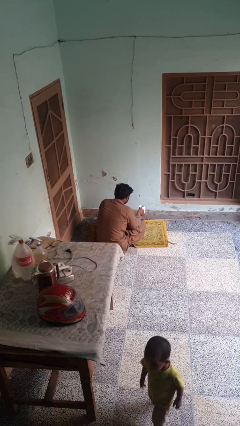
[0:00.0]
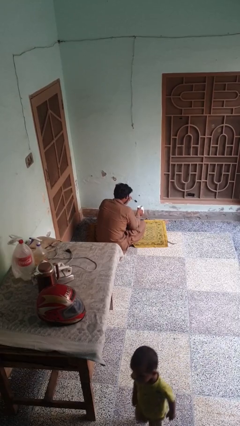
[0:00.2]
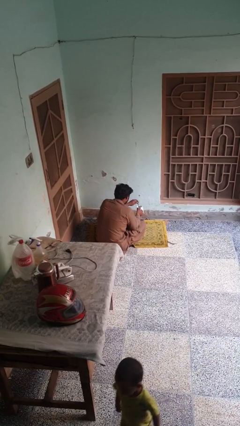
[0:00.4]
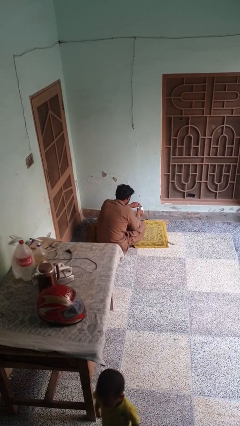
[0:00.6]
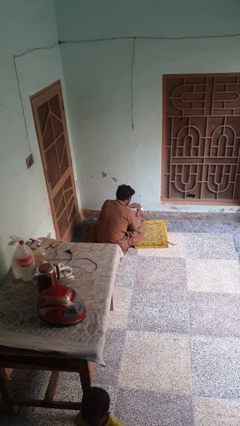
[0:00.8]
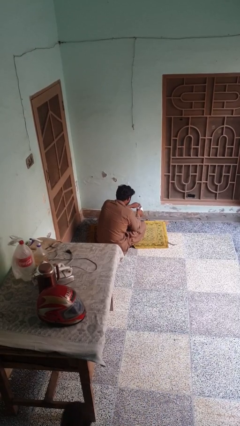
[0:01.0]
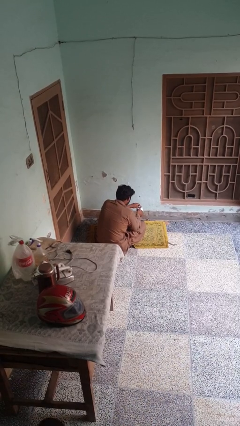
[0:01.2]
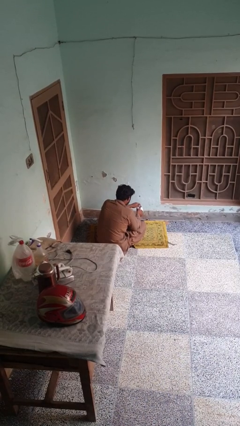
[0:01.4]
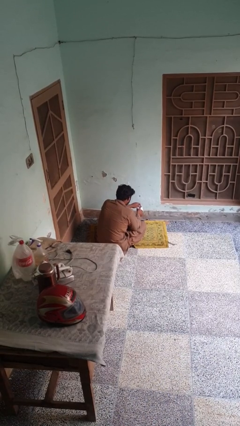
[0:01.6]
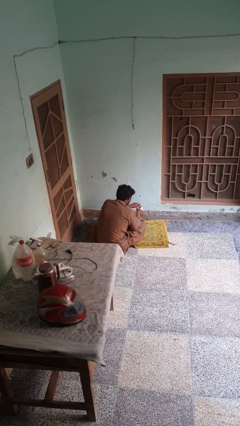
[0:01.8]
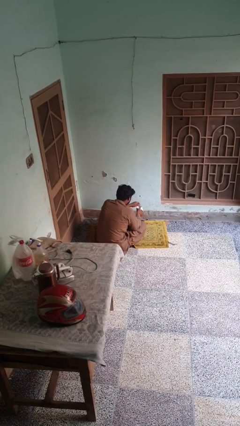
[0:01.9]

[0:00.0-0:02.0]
person stirs mug

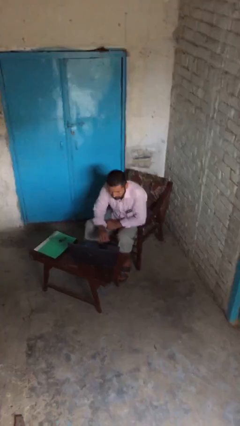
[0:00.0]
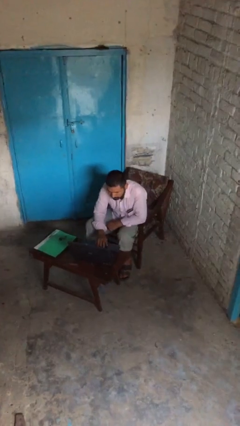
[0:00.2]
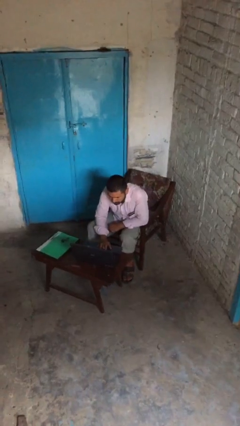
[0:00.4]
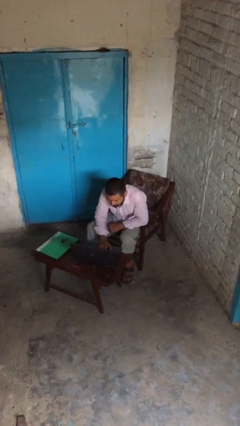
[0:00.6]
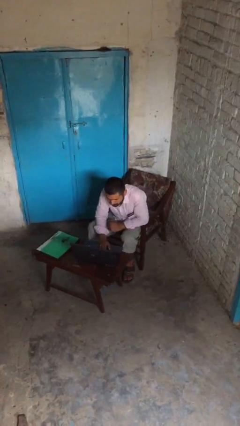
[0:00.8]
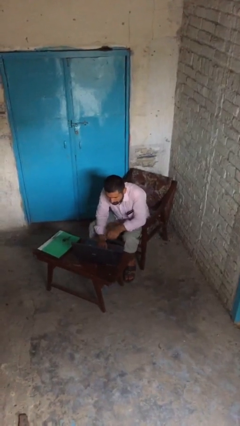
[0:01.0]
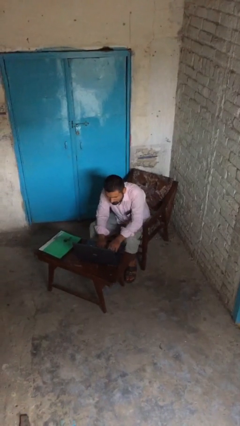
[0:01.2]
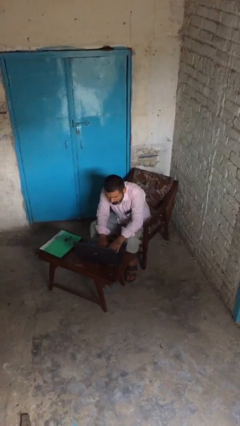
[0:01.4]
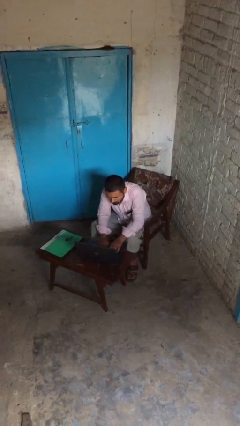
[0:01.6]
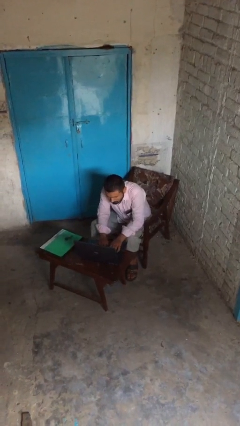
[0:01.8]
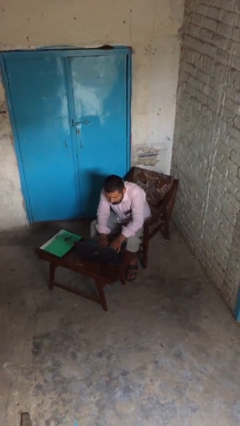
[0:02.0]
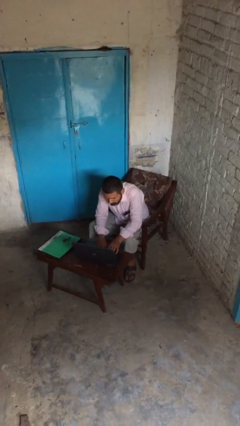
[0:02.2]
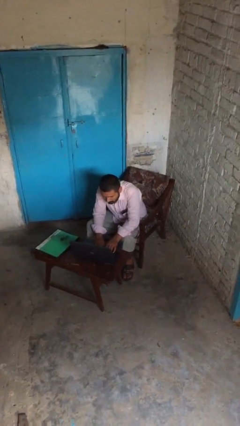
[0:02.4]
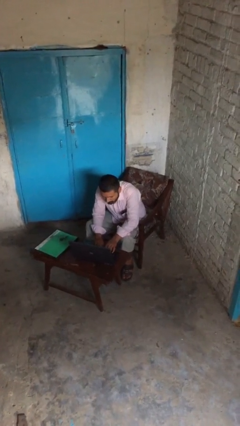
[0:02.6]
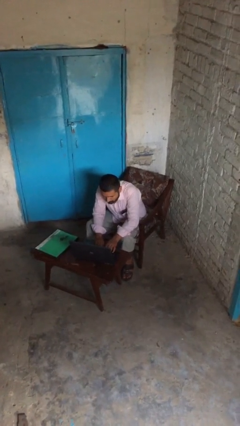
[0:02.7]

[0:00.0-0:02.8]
person interacts with laptop

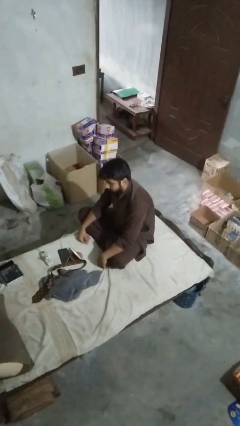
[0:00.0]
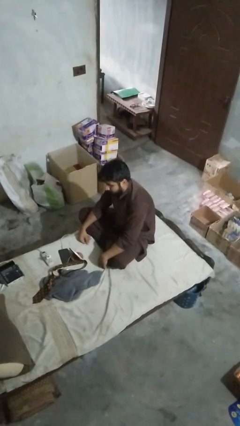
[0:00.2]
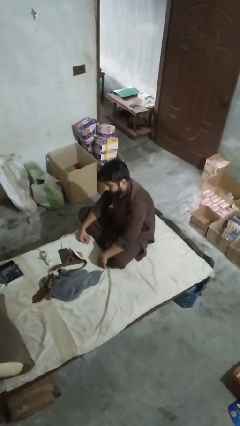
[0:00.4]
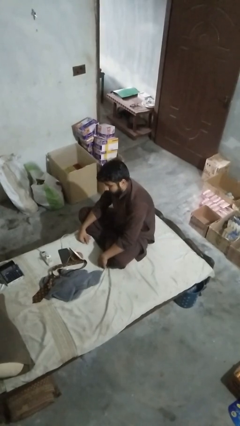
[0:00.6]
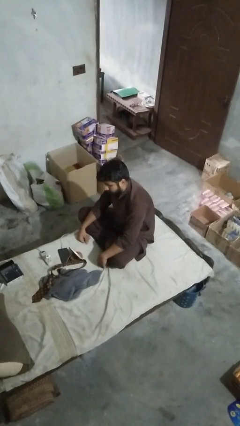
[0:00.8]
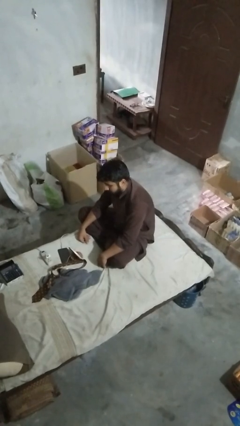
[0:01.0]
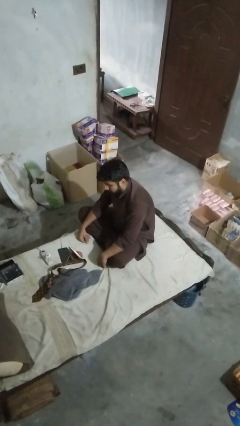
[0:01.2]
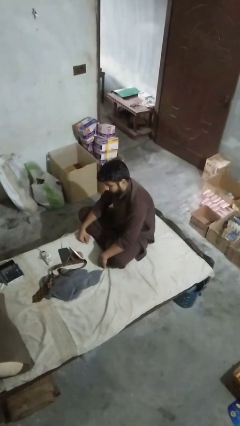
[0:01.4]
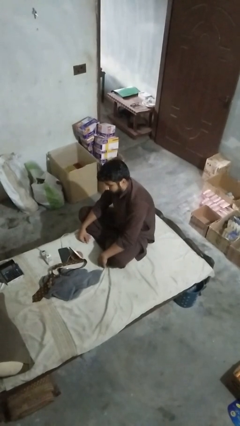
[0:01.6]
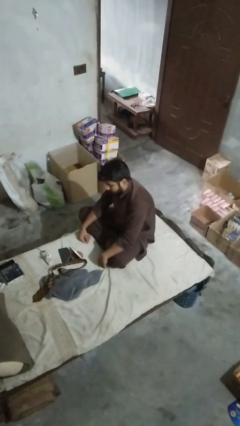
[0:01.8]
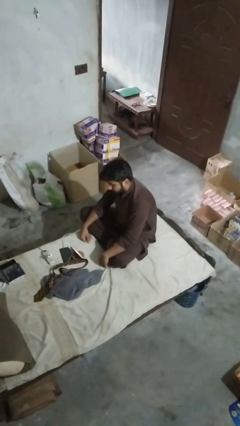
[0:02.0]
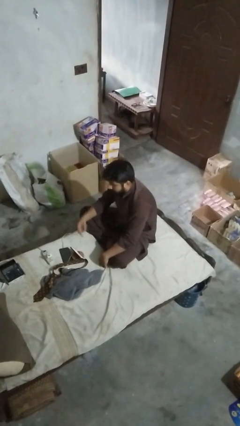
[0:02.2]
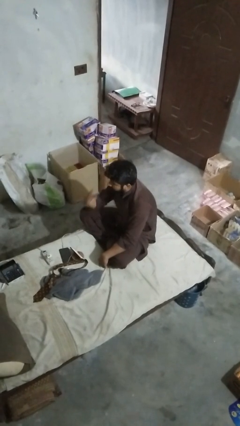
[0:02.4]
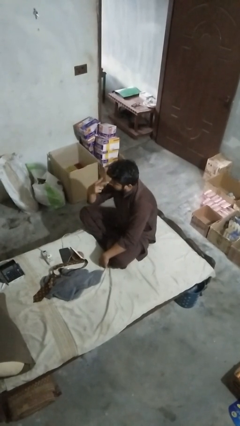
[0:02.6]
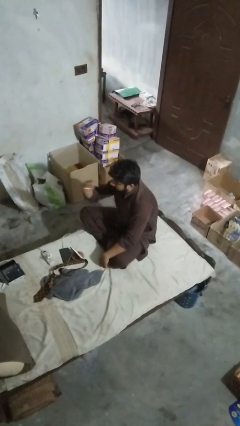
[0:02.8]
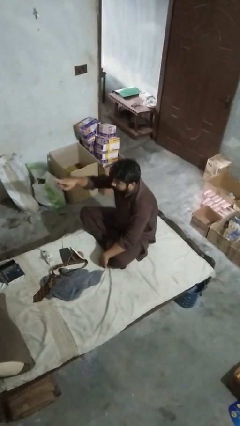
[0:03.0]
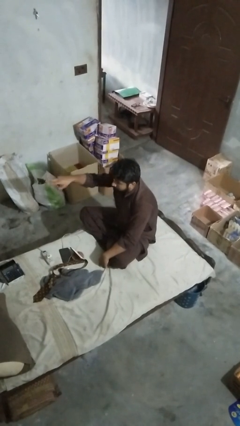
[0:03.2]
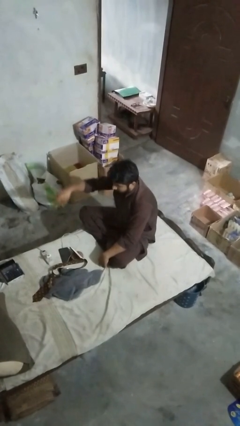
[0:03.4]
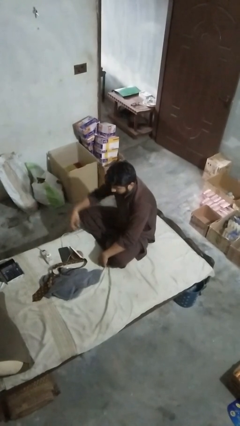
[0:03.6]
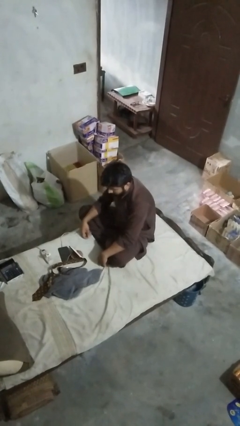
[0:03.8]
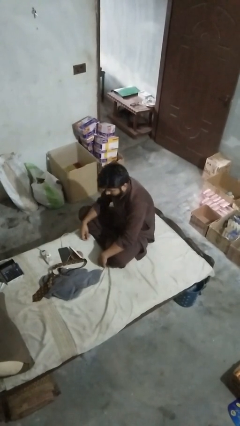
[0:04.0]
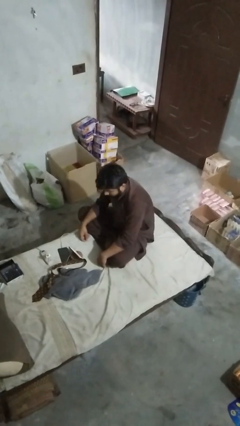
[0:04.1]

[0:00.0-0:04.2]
person gestures watch closely

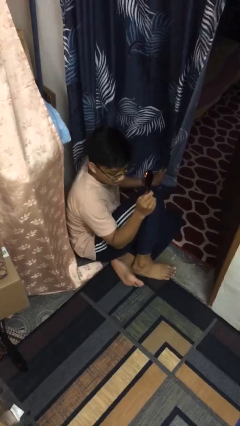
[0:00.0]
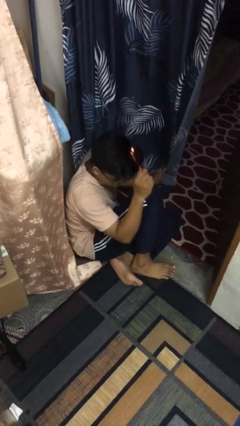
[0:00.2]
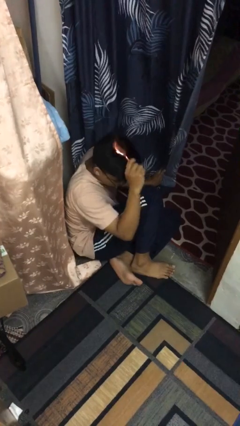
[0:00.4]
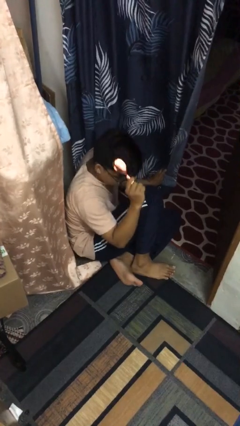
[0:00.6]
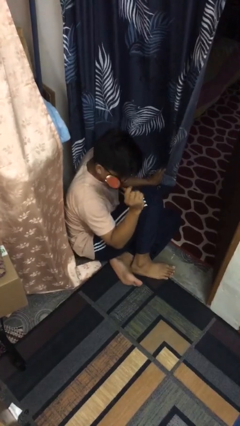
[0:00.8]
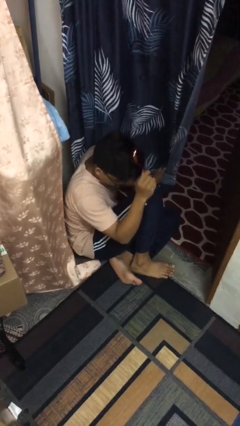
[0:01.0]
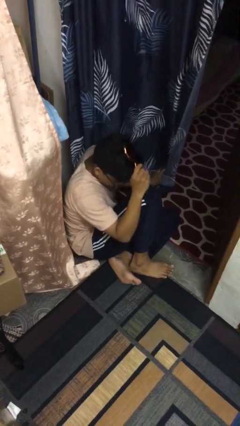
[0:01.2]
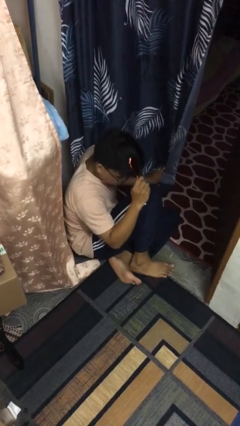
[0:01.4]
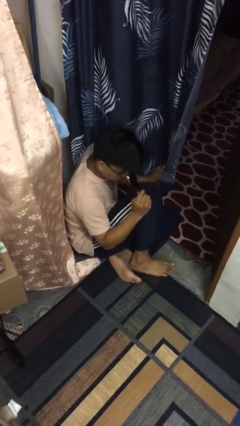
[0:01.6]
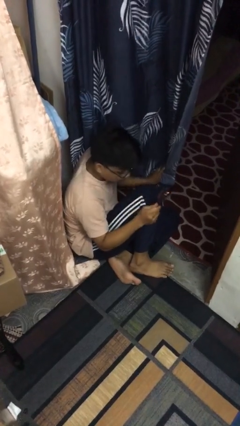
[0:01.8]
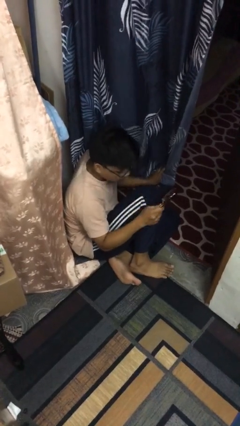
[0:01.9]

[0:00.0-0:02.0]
person brushes hair

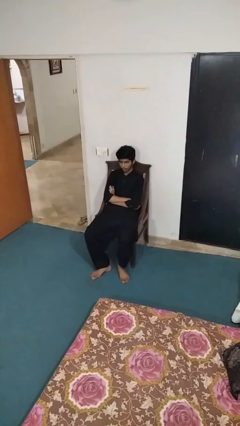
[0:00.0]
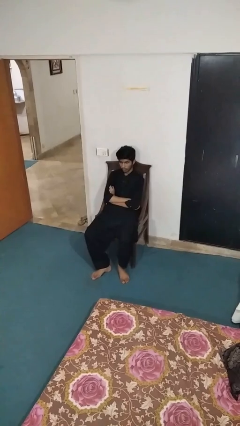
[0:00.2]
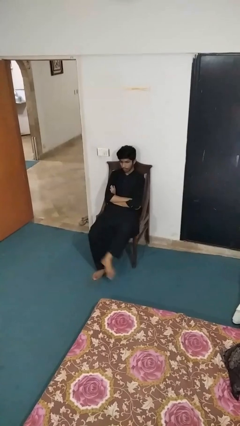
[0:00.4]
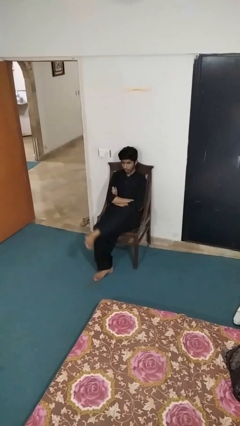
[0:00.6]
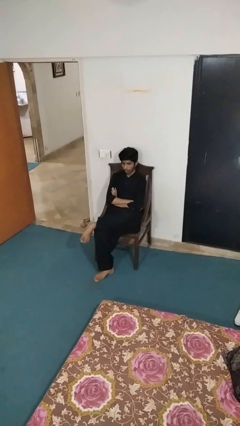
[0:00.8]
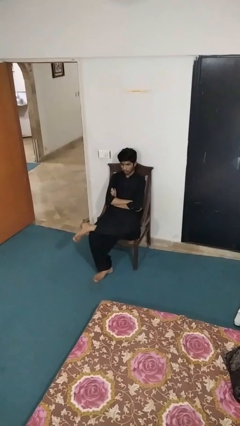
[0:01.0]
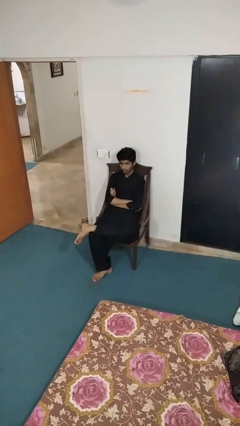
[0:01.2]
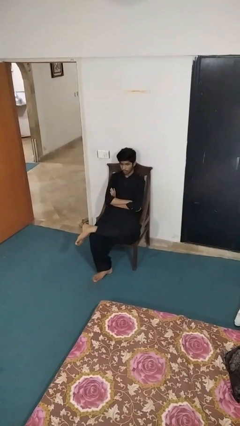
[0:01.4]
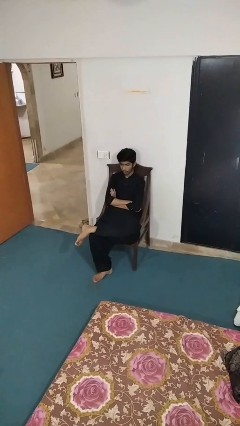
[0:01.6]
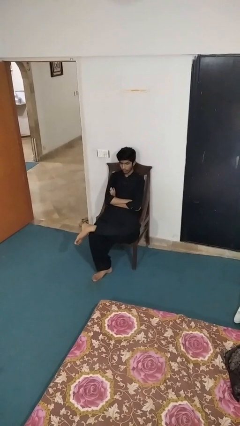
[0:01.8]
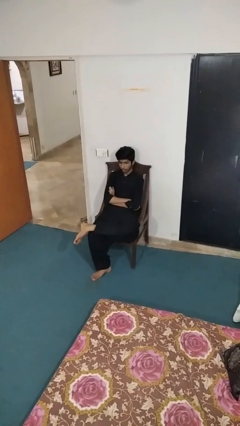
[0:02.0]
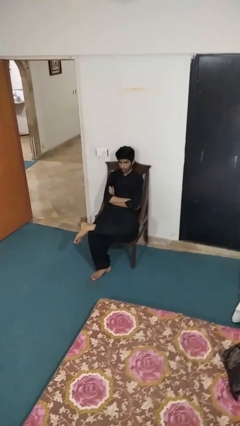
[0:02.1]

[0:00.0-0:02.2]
person crosses legs

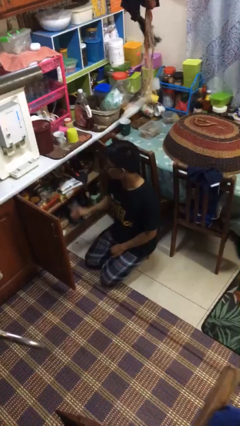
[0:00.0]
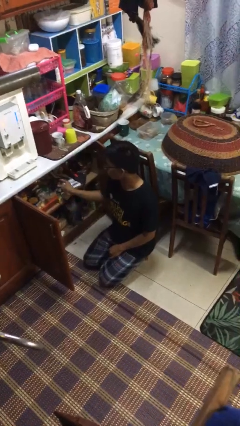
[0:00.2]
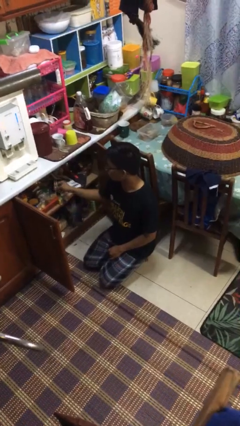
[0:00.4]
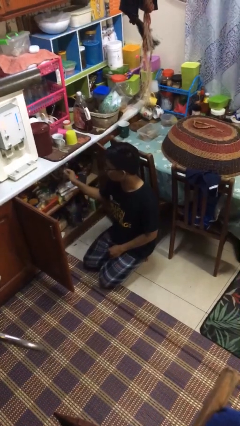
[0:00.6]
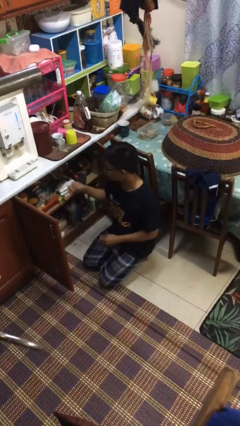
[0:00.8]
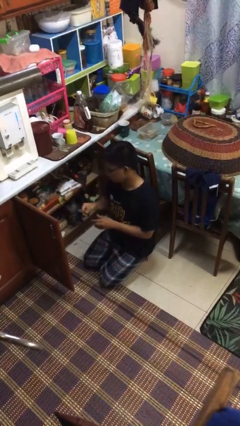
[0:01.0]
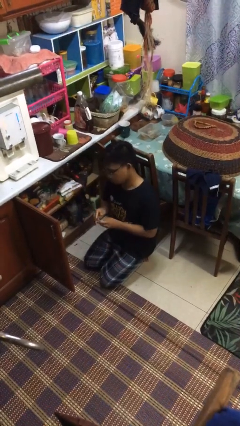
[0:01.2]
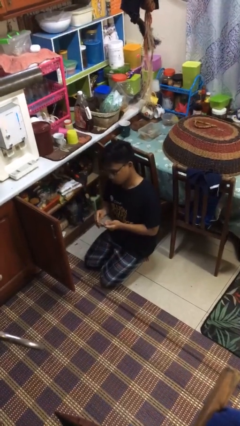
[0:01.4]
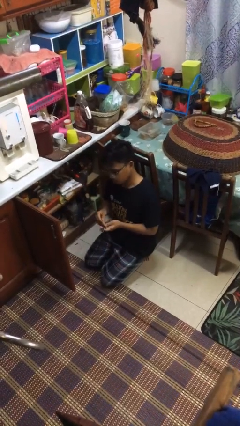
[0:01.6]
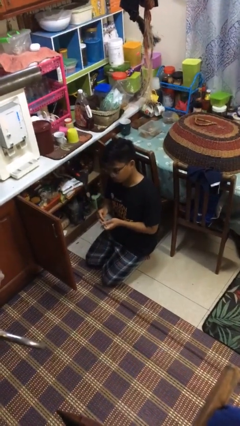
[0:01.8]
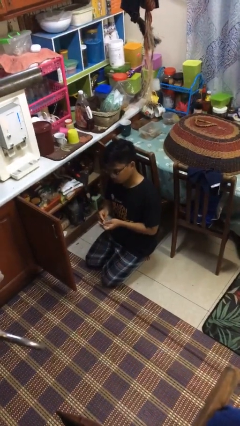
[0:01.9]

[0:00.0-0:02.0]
person takes object from kitchen drawer

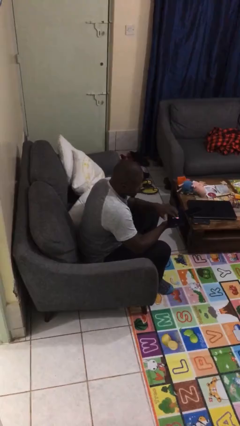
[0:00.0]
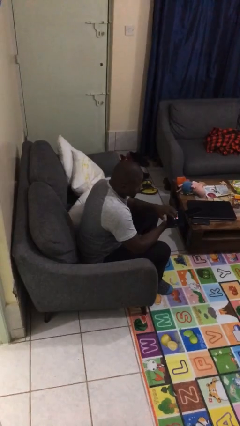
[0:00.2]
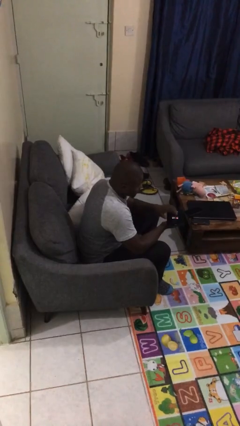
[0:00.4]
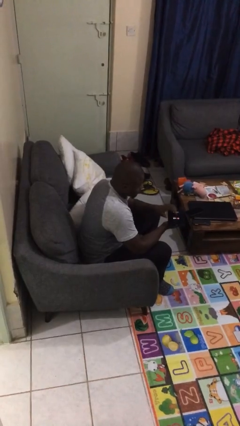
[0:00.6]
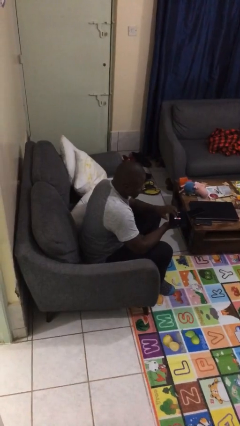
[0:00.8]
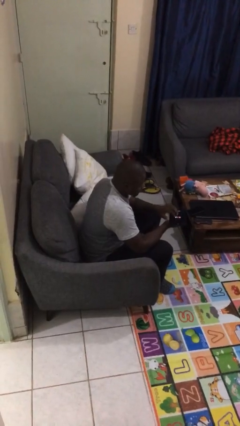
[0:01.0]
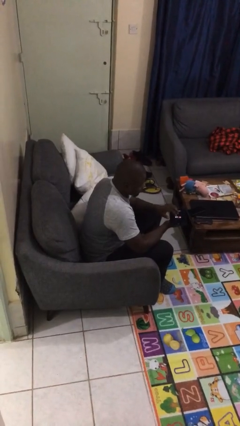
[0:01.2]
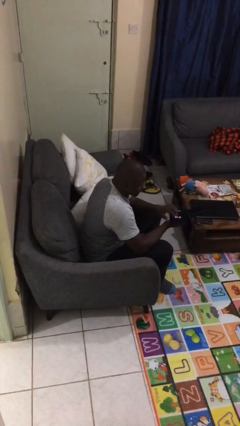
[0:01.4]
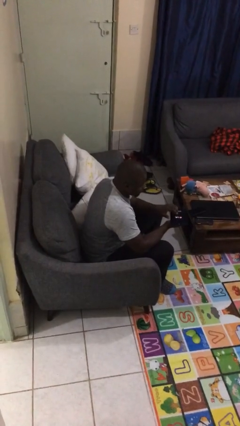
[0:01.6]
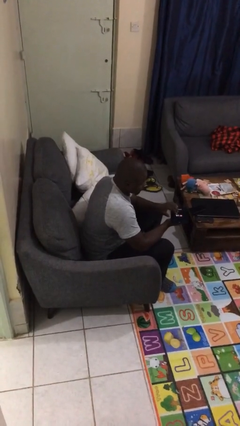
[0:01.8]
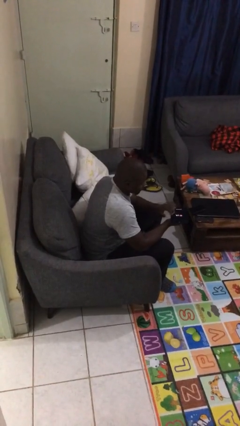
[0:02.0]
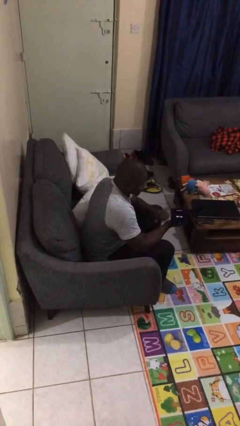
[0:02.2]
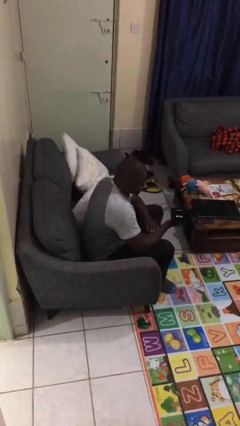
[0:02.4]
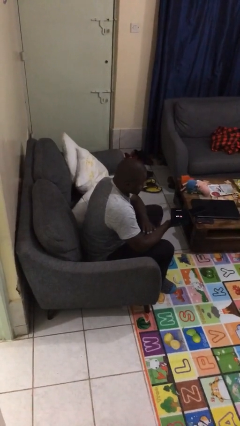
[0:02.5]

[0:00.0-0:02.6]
person interacts with tablet
